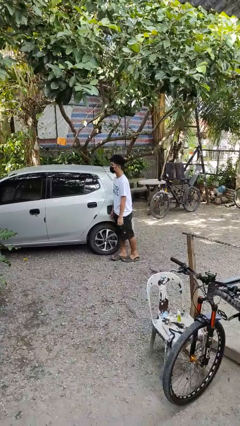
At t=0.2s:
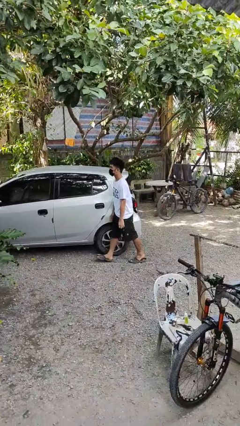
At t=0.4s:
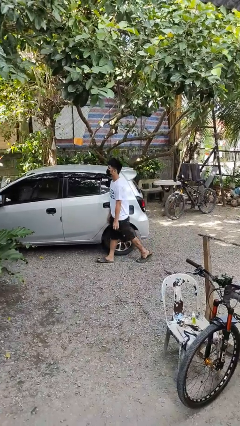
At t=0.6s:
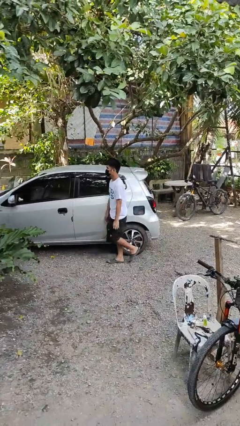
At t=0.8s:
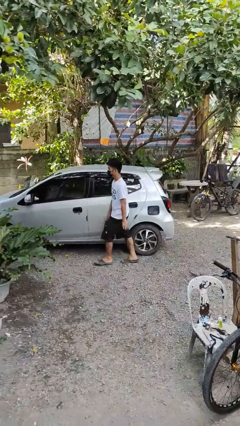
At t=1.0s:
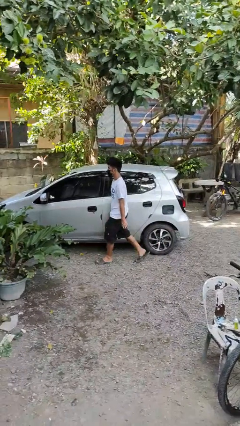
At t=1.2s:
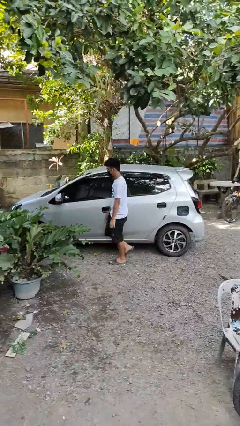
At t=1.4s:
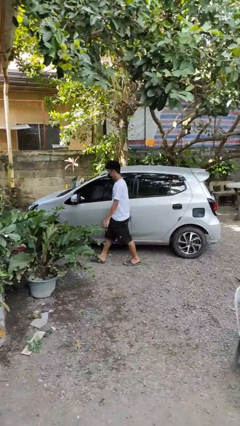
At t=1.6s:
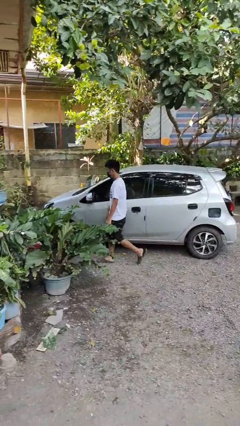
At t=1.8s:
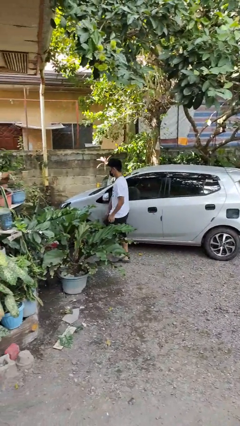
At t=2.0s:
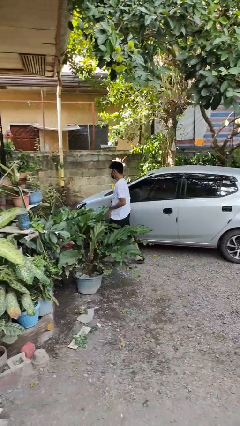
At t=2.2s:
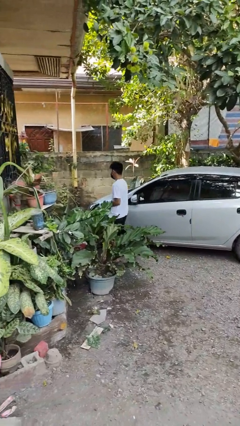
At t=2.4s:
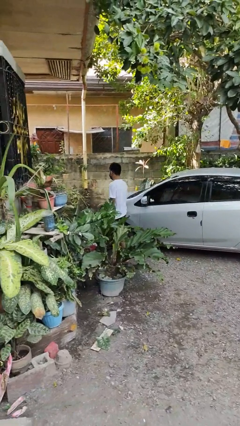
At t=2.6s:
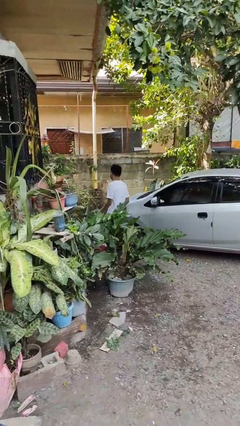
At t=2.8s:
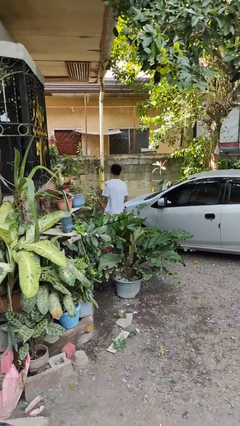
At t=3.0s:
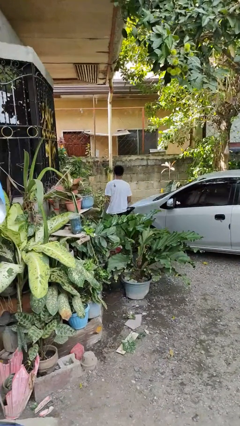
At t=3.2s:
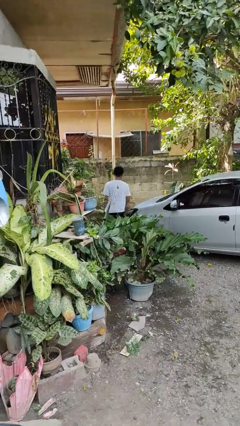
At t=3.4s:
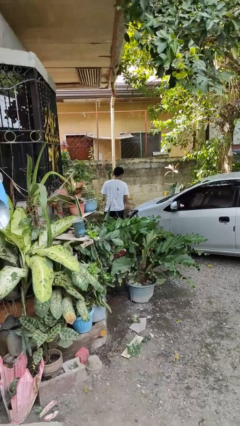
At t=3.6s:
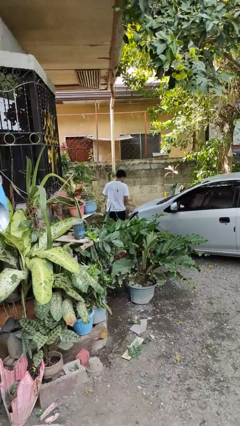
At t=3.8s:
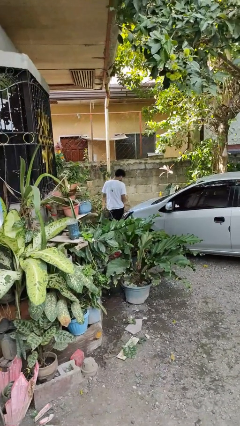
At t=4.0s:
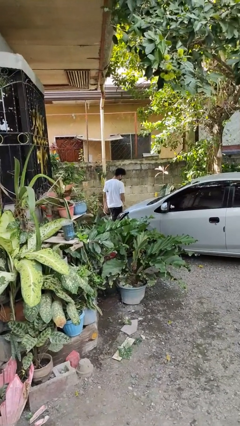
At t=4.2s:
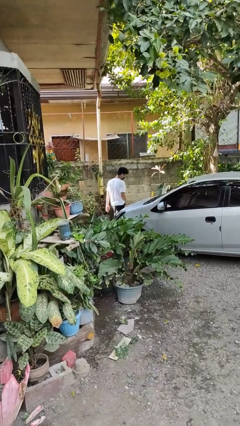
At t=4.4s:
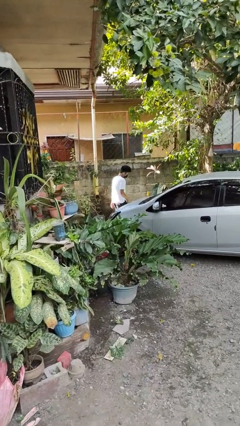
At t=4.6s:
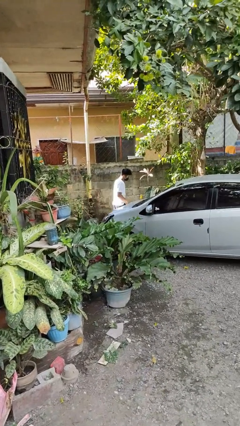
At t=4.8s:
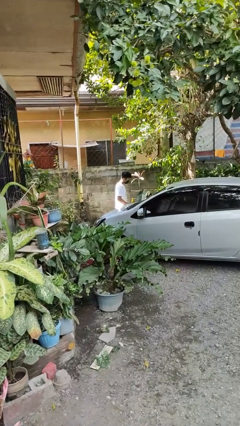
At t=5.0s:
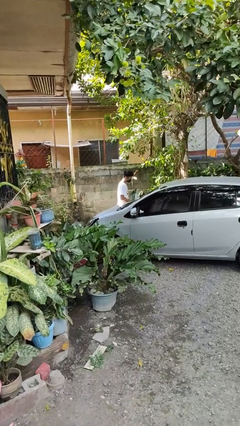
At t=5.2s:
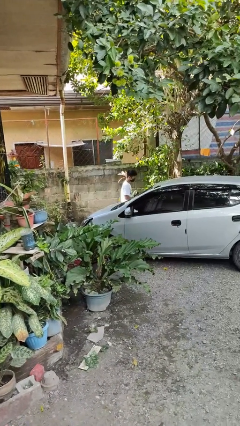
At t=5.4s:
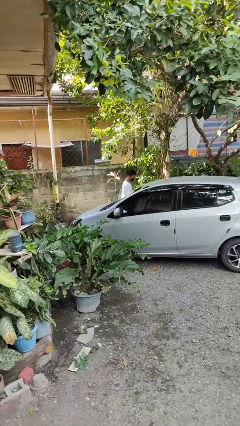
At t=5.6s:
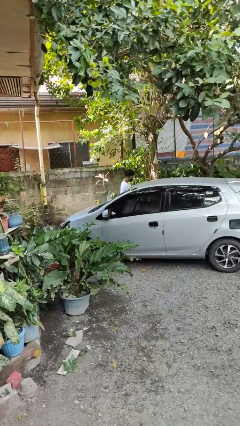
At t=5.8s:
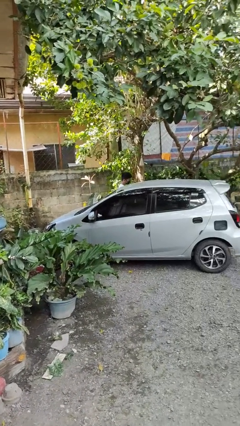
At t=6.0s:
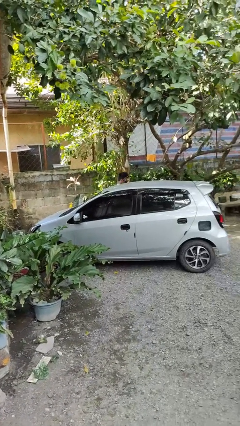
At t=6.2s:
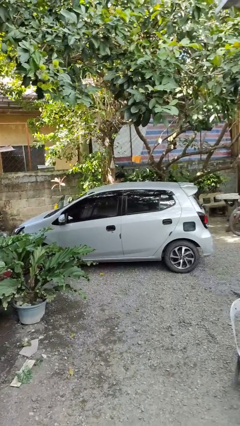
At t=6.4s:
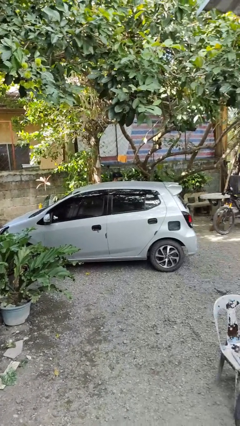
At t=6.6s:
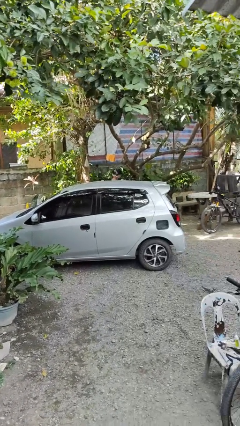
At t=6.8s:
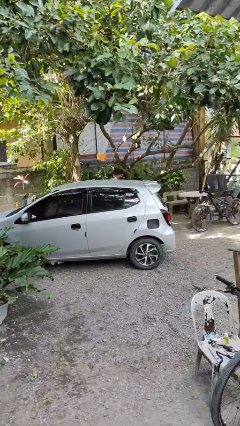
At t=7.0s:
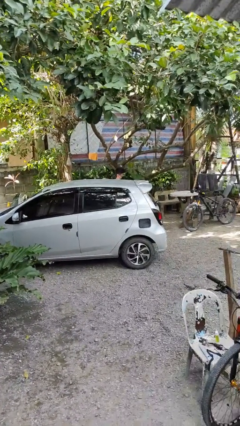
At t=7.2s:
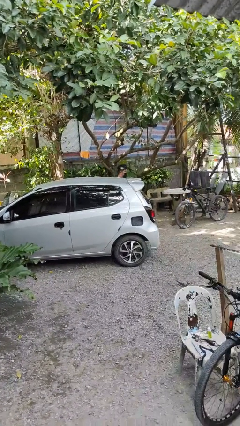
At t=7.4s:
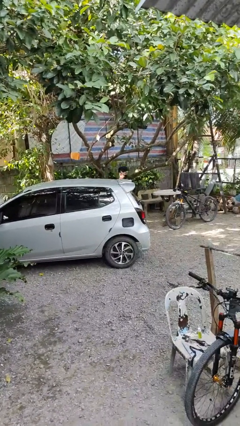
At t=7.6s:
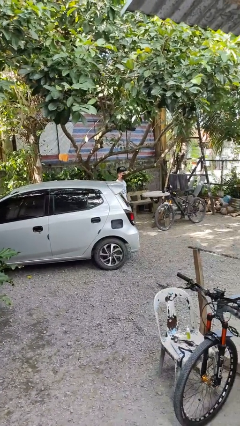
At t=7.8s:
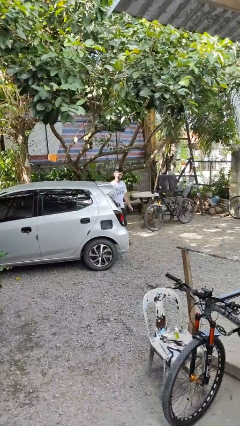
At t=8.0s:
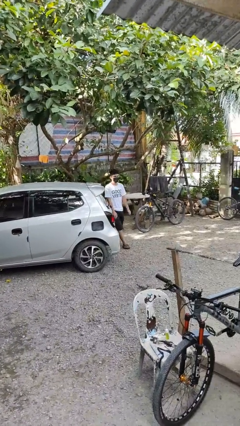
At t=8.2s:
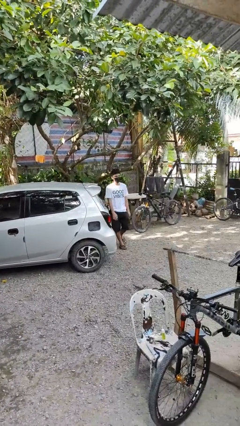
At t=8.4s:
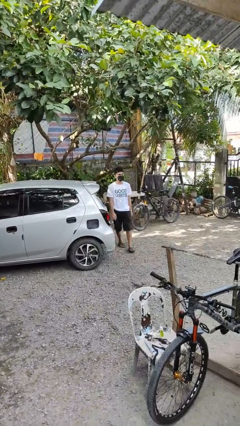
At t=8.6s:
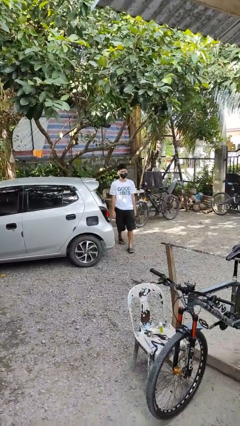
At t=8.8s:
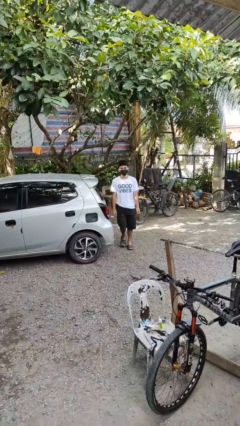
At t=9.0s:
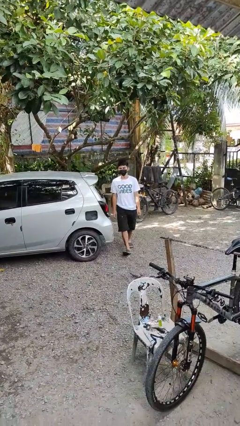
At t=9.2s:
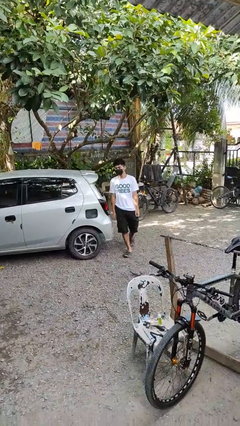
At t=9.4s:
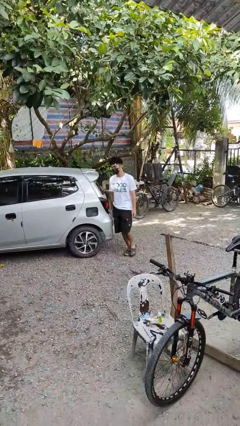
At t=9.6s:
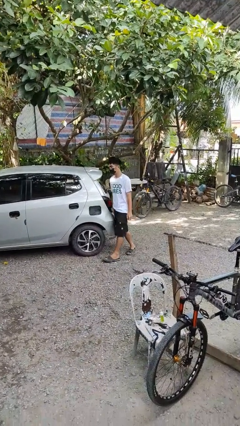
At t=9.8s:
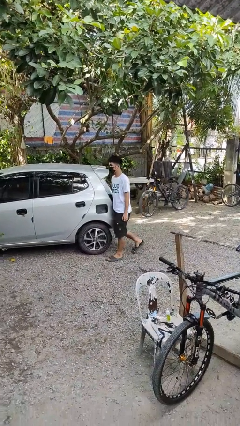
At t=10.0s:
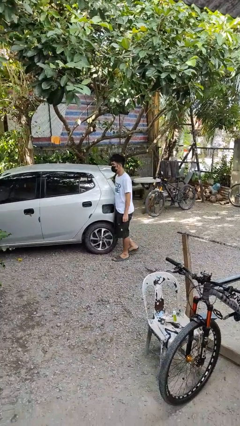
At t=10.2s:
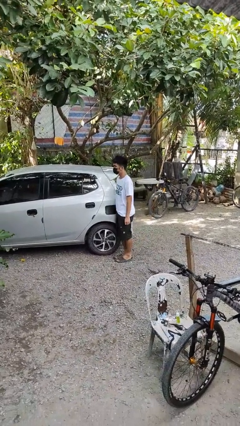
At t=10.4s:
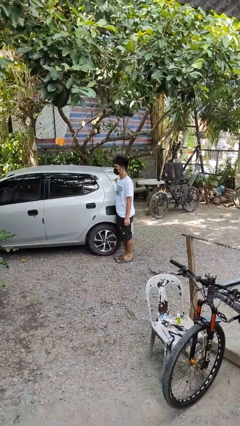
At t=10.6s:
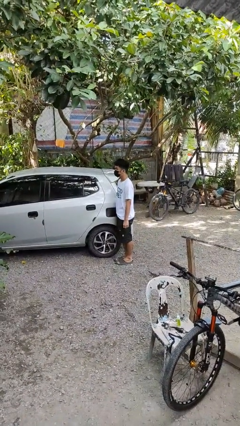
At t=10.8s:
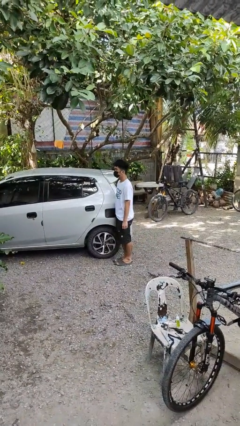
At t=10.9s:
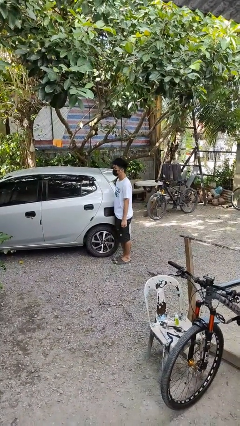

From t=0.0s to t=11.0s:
person walks around car

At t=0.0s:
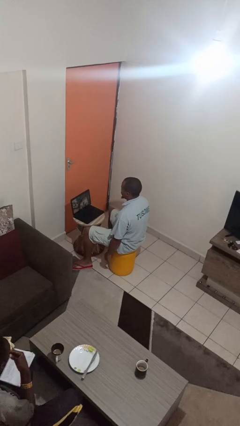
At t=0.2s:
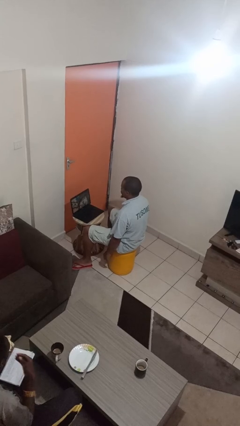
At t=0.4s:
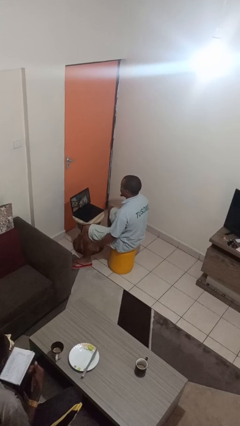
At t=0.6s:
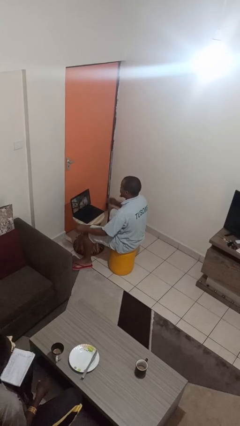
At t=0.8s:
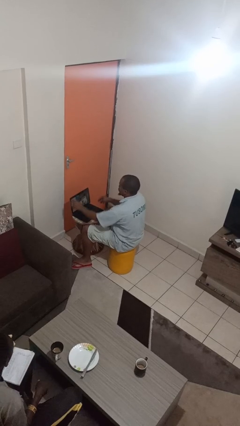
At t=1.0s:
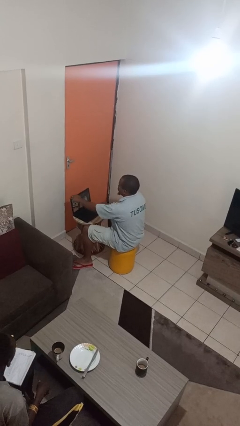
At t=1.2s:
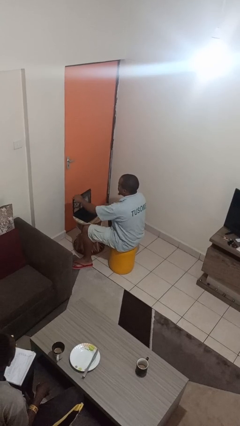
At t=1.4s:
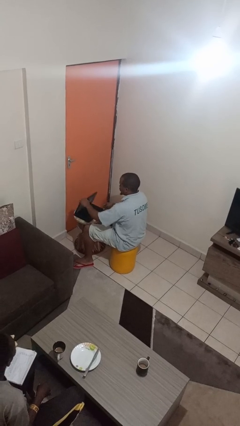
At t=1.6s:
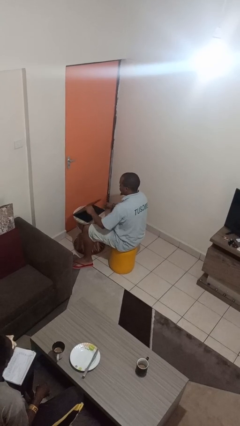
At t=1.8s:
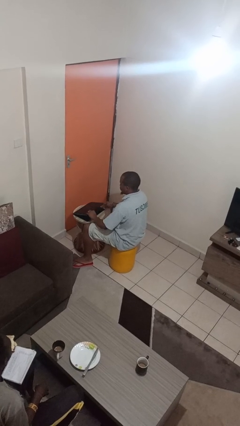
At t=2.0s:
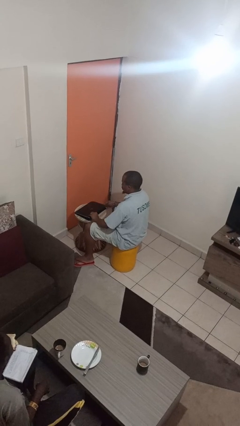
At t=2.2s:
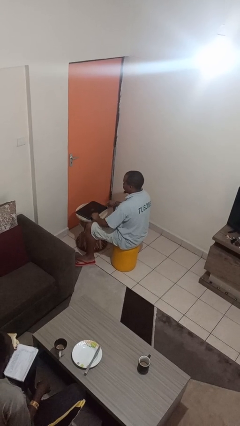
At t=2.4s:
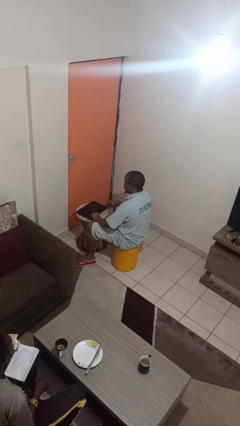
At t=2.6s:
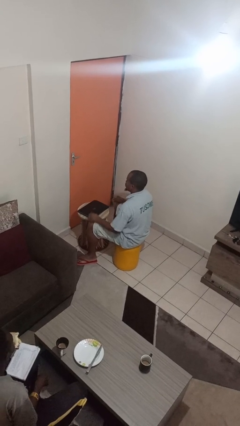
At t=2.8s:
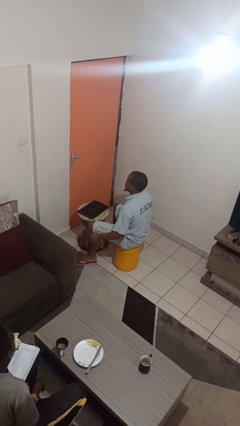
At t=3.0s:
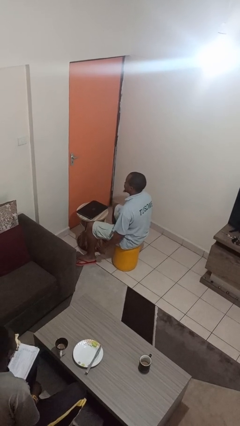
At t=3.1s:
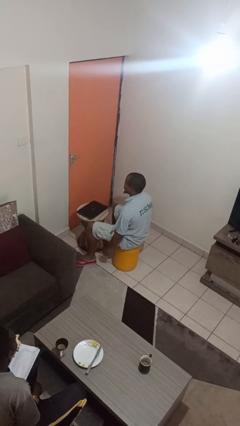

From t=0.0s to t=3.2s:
person closes laptop

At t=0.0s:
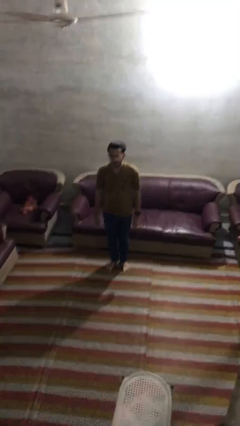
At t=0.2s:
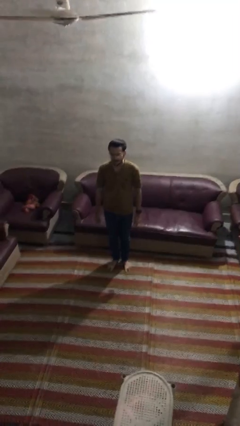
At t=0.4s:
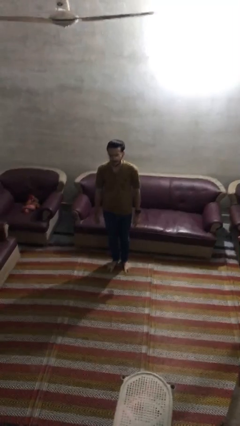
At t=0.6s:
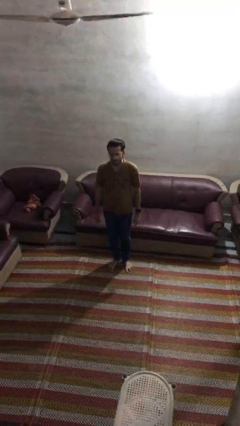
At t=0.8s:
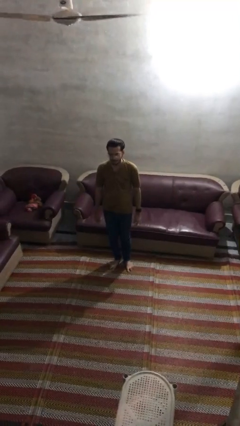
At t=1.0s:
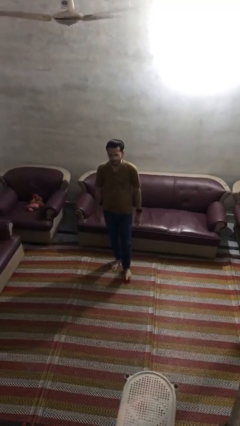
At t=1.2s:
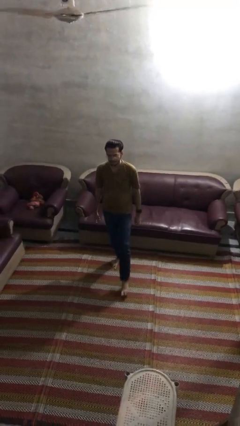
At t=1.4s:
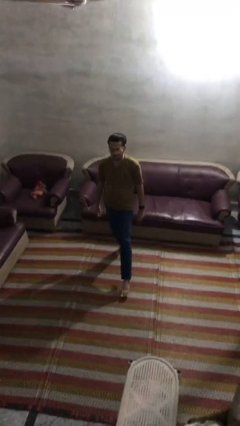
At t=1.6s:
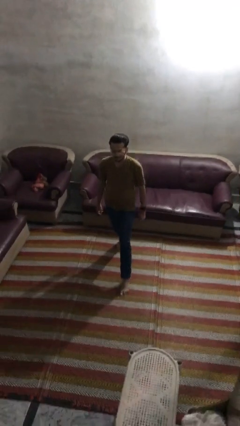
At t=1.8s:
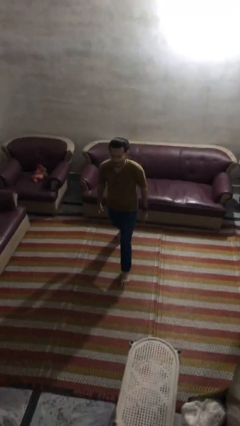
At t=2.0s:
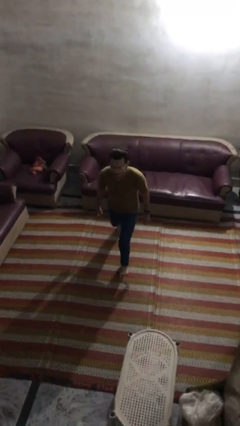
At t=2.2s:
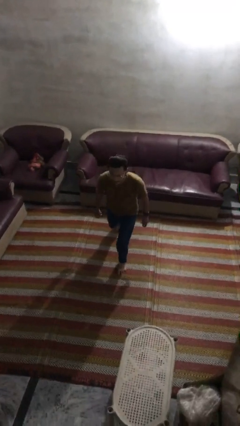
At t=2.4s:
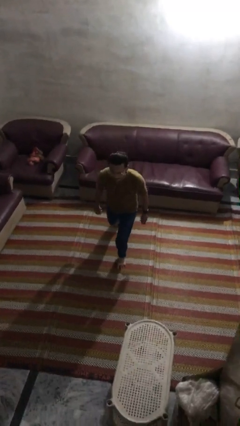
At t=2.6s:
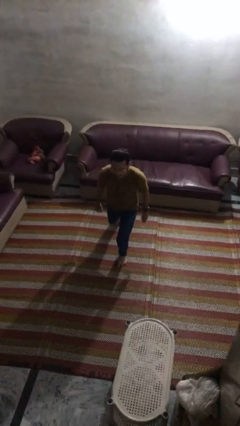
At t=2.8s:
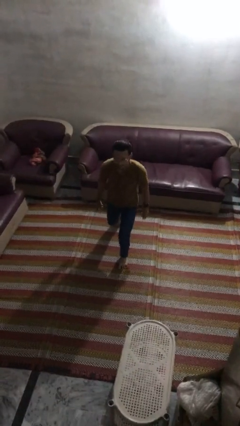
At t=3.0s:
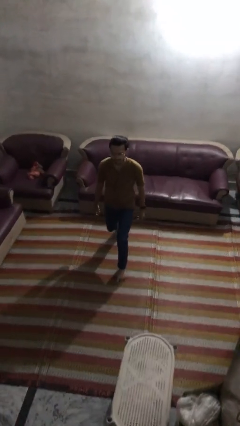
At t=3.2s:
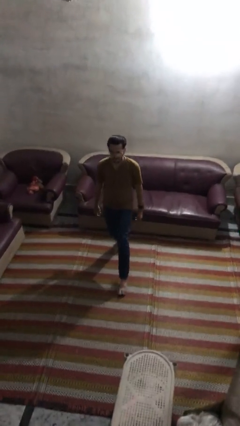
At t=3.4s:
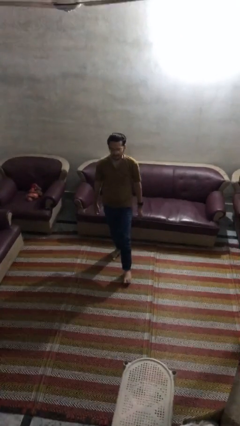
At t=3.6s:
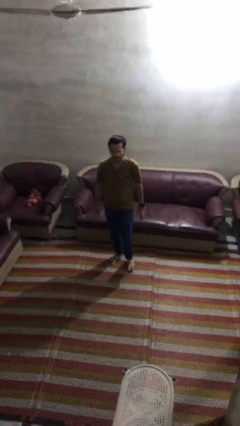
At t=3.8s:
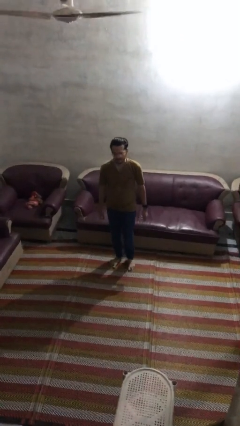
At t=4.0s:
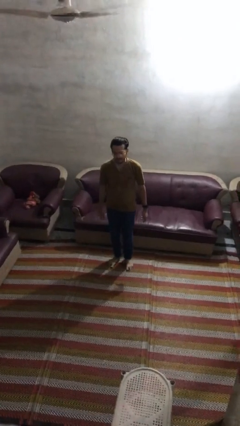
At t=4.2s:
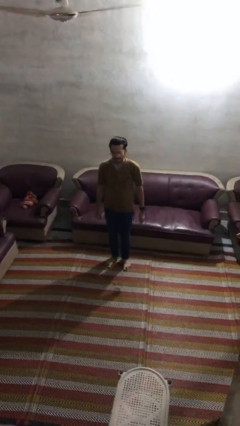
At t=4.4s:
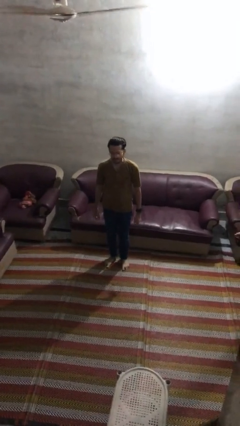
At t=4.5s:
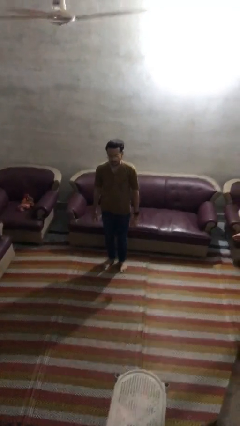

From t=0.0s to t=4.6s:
person exercises with lunges
